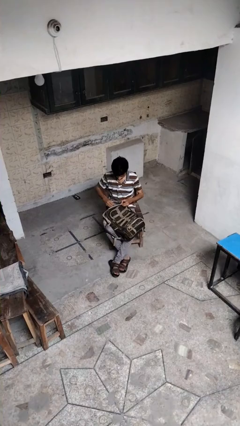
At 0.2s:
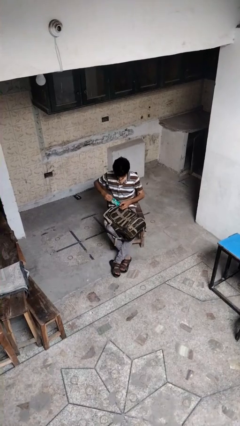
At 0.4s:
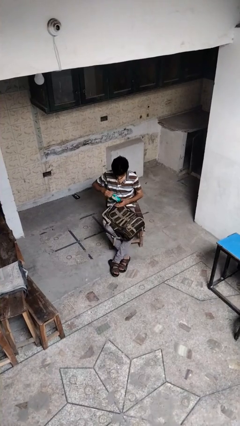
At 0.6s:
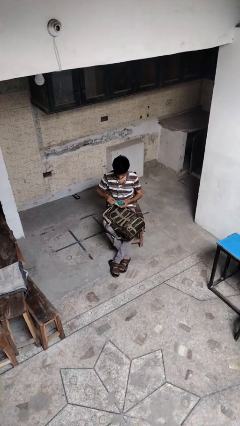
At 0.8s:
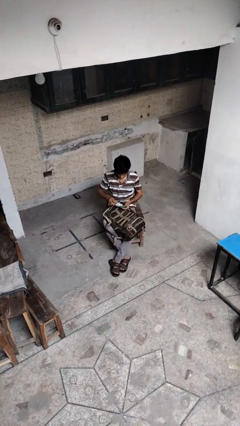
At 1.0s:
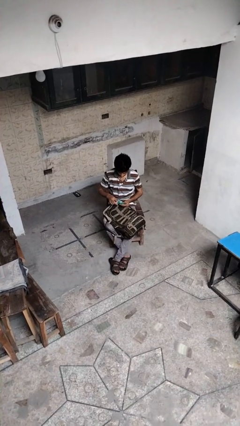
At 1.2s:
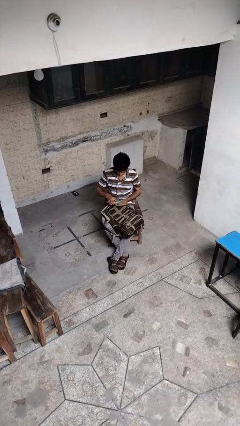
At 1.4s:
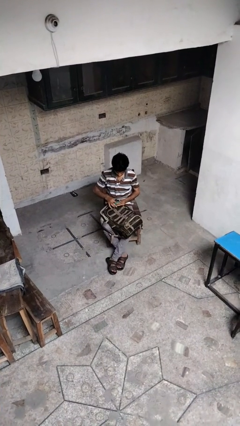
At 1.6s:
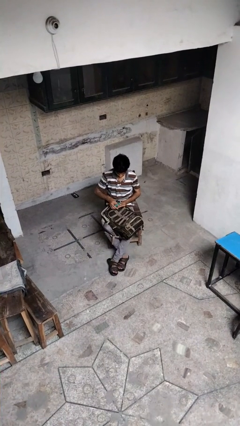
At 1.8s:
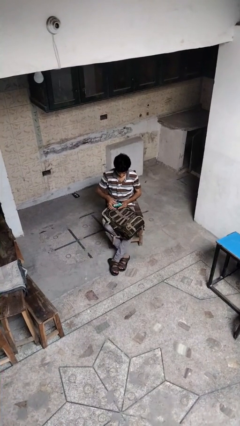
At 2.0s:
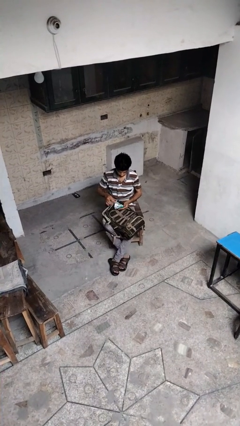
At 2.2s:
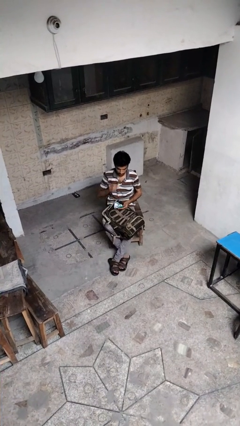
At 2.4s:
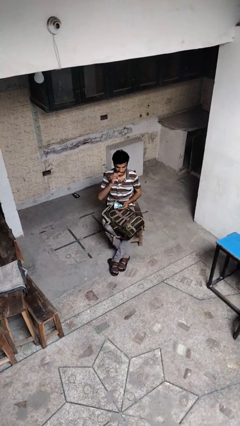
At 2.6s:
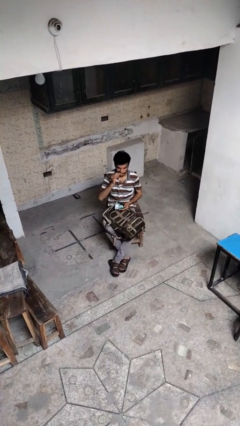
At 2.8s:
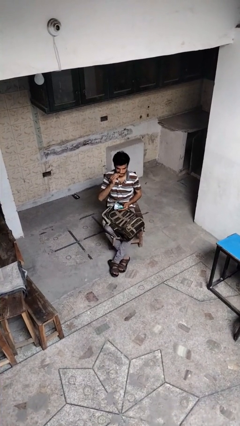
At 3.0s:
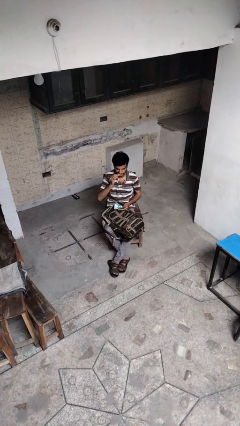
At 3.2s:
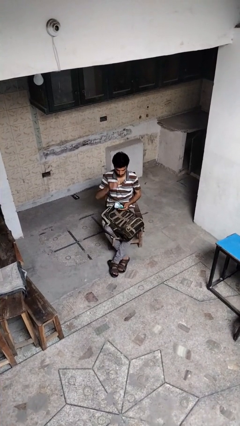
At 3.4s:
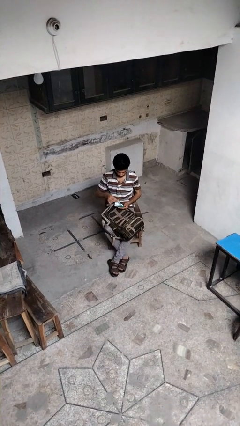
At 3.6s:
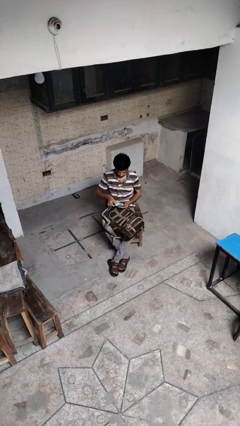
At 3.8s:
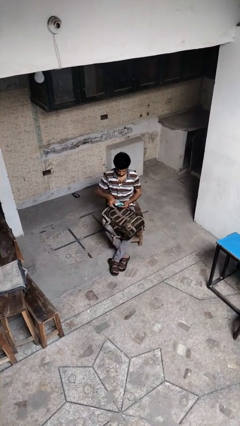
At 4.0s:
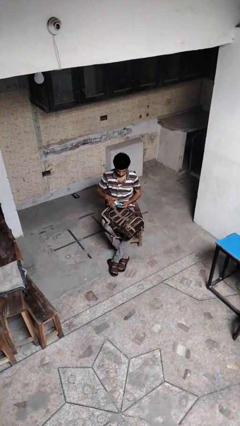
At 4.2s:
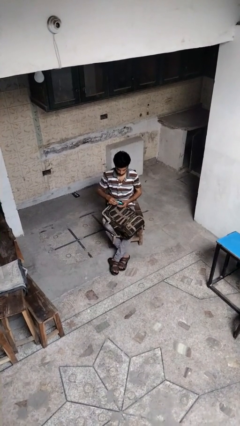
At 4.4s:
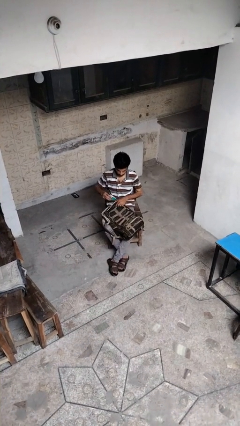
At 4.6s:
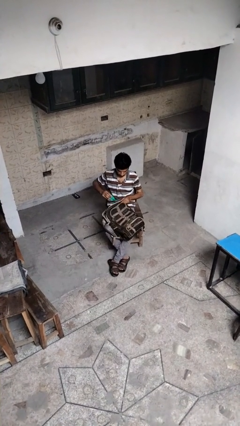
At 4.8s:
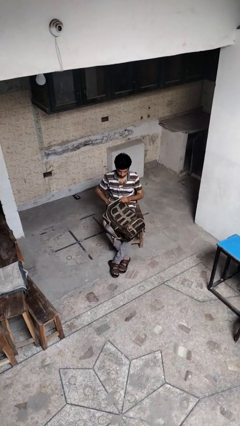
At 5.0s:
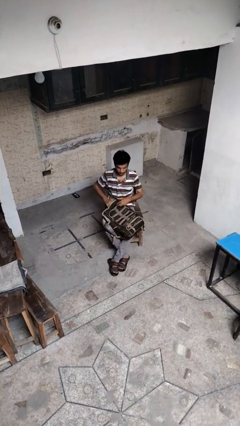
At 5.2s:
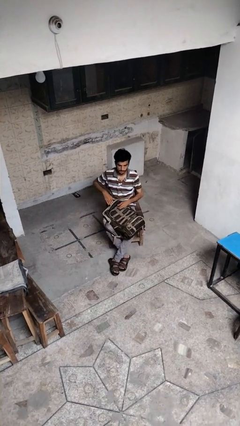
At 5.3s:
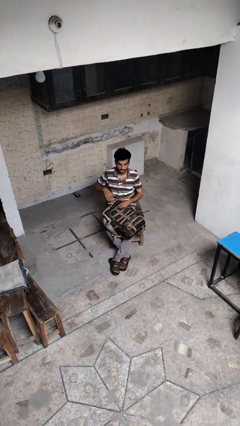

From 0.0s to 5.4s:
person eats snack from bag

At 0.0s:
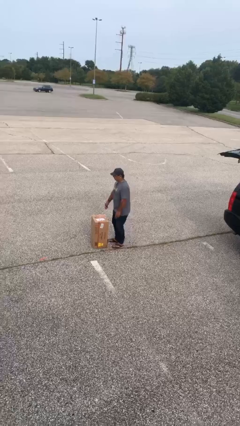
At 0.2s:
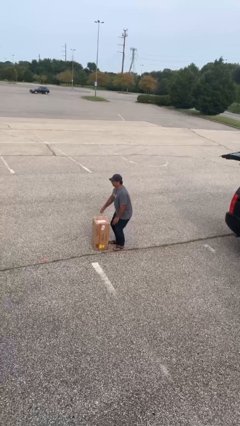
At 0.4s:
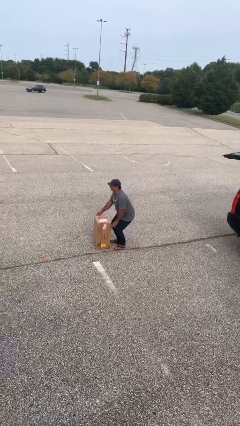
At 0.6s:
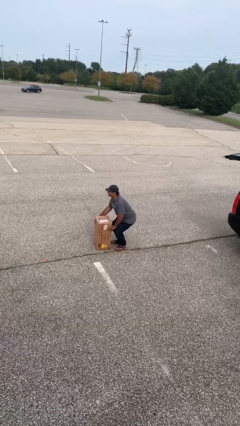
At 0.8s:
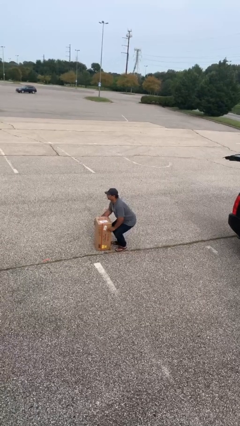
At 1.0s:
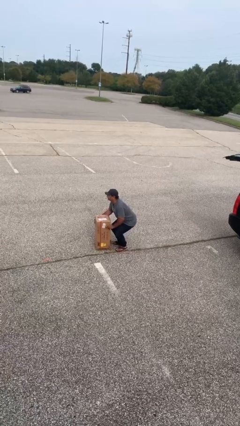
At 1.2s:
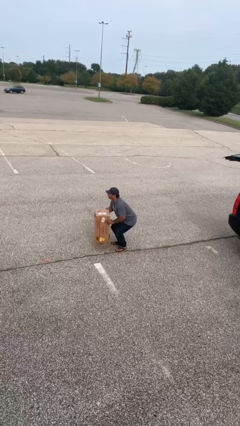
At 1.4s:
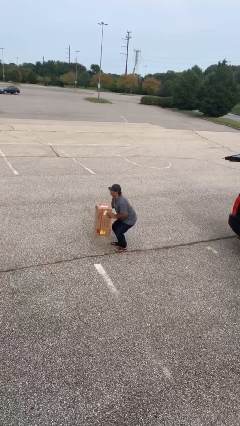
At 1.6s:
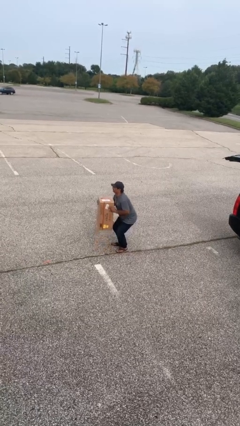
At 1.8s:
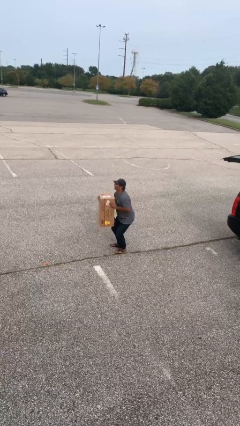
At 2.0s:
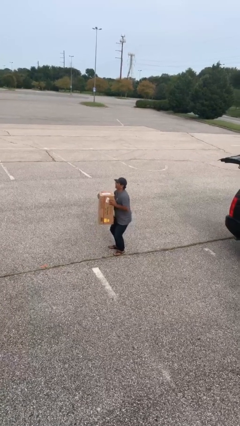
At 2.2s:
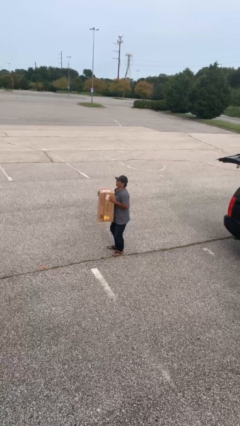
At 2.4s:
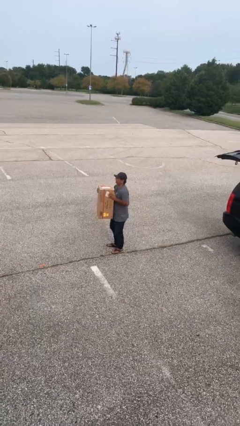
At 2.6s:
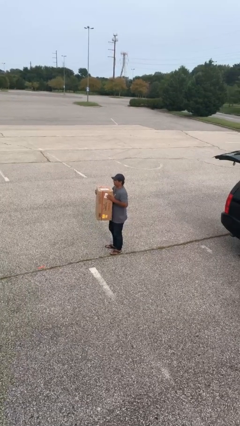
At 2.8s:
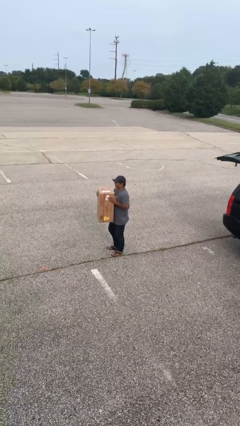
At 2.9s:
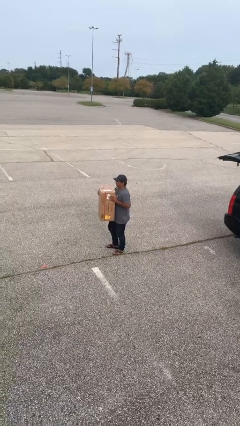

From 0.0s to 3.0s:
person picks up object from floor

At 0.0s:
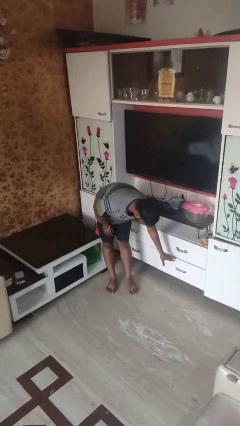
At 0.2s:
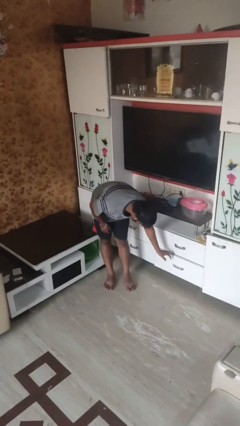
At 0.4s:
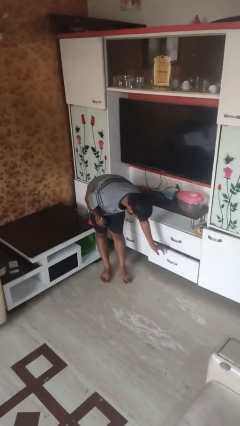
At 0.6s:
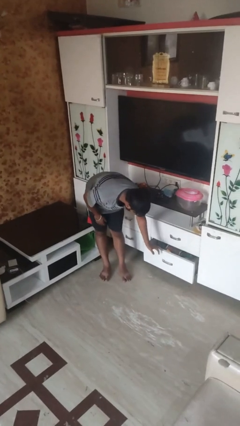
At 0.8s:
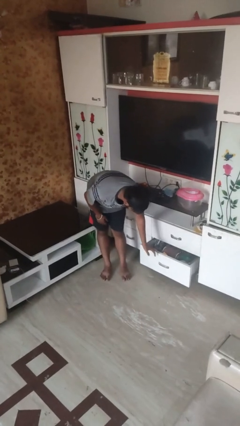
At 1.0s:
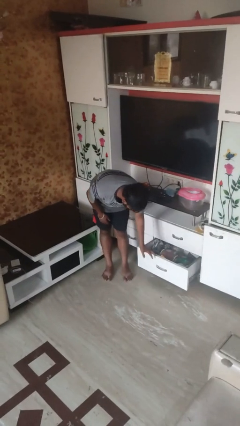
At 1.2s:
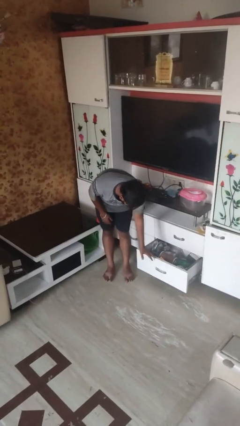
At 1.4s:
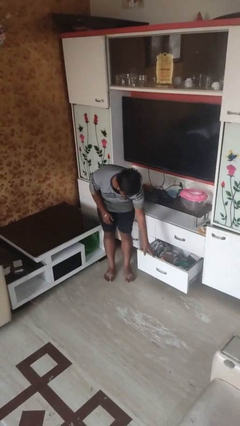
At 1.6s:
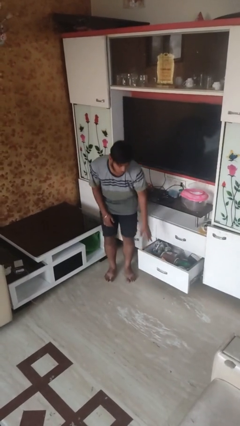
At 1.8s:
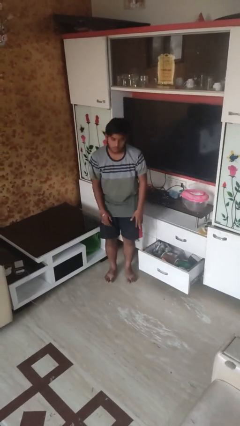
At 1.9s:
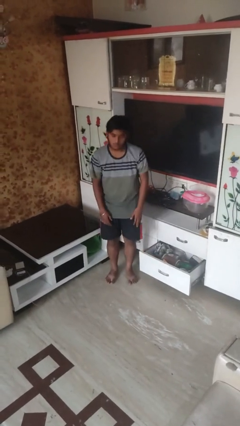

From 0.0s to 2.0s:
person opens dresser drawer

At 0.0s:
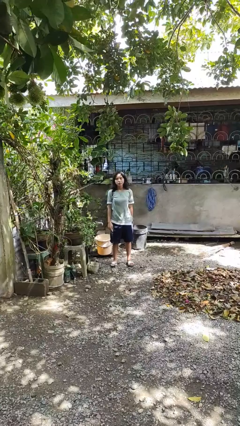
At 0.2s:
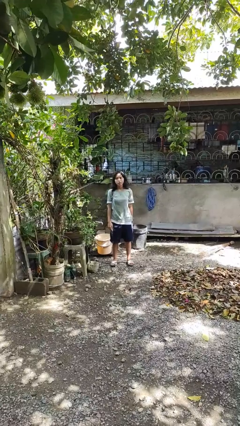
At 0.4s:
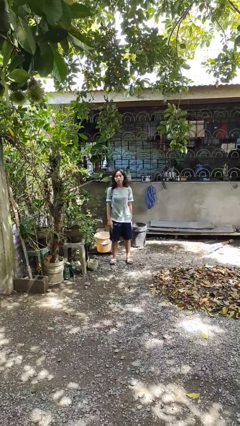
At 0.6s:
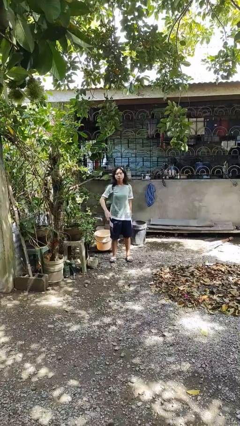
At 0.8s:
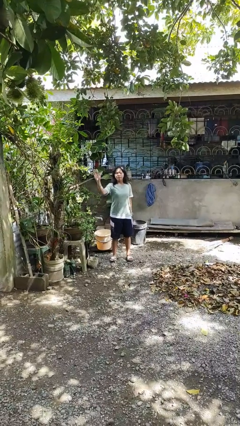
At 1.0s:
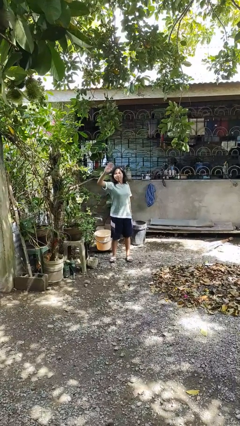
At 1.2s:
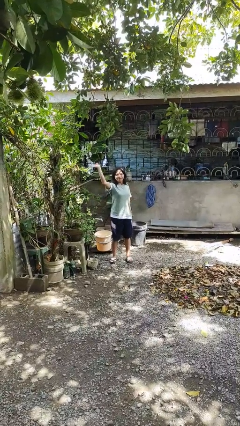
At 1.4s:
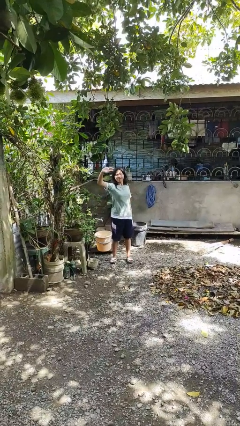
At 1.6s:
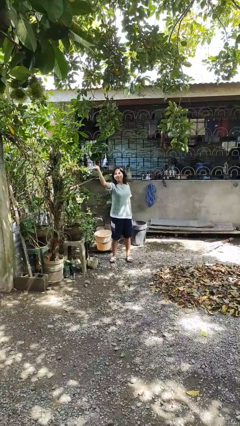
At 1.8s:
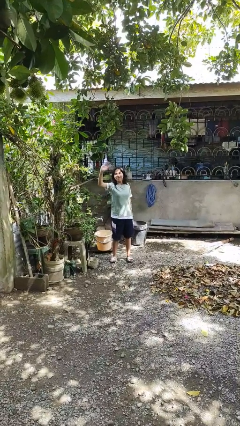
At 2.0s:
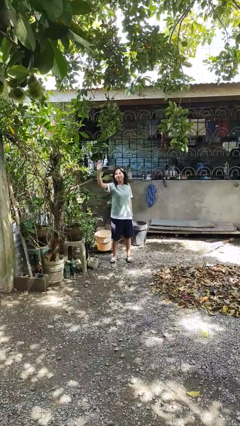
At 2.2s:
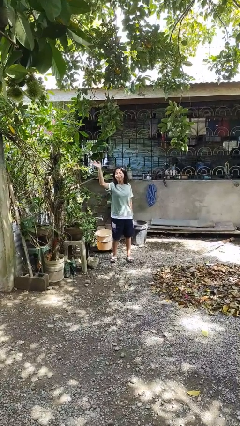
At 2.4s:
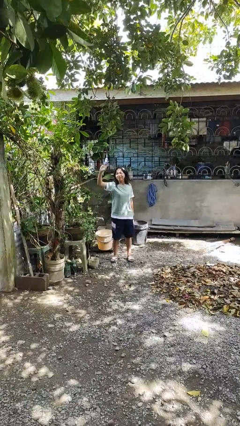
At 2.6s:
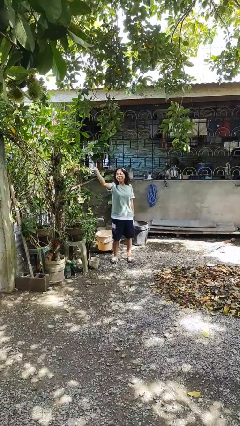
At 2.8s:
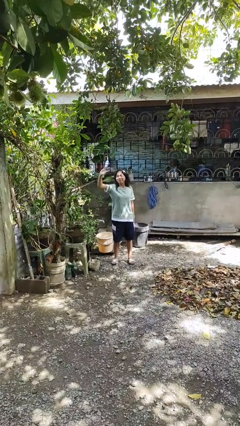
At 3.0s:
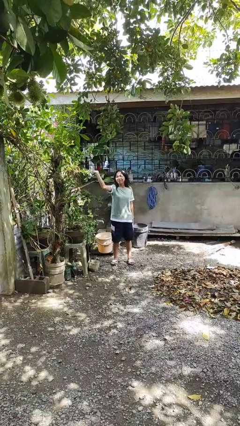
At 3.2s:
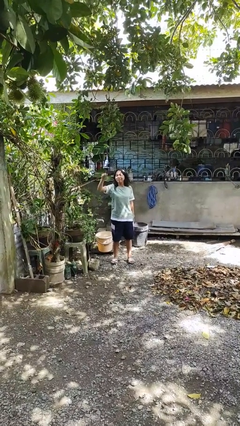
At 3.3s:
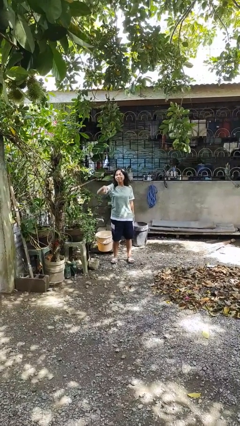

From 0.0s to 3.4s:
person waves at person

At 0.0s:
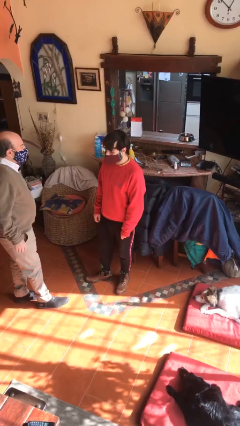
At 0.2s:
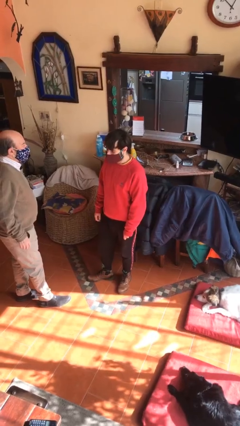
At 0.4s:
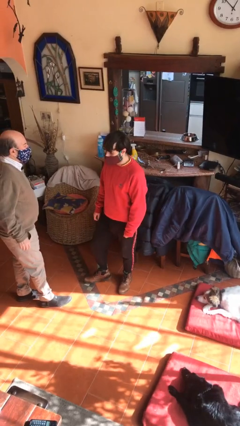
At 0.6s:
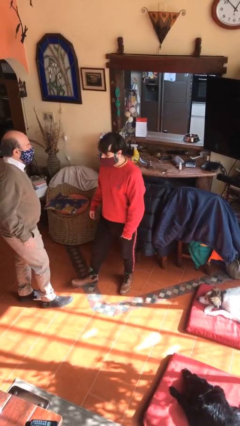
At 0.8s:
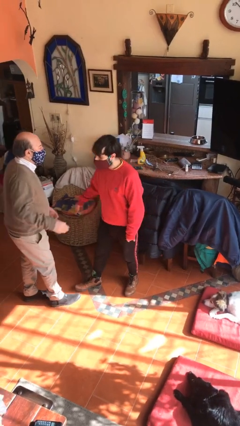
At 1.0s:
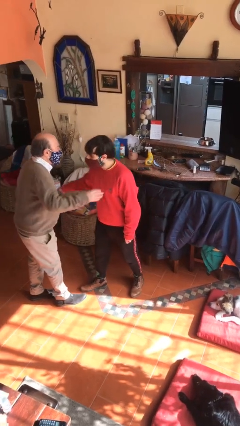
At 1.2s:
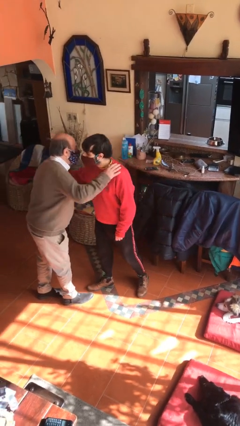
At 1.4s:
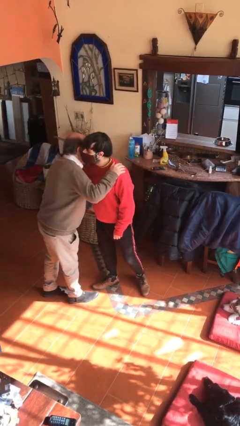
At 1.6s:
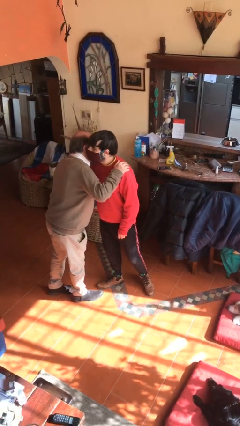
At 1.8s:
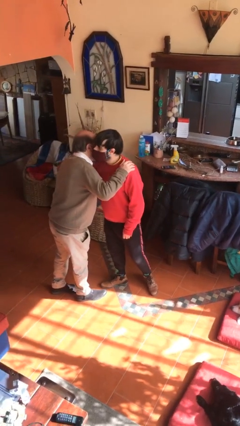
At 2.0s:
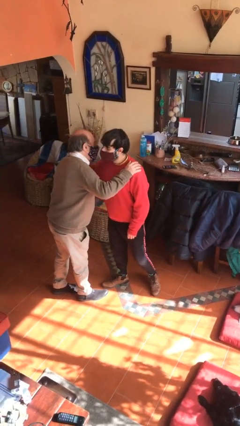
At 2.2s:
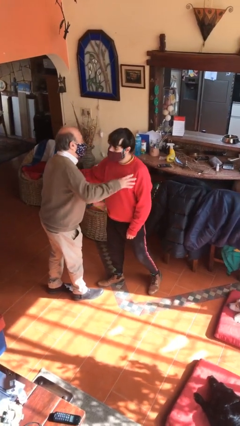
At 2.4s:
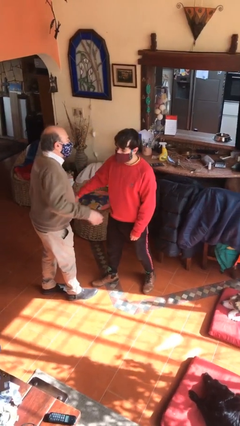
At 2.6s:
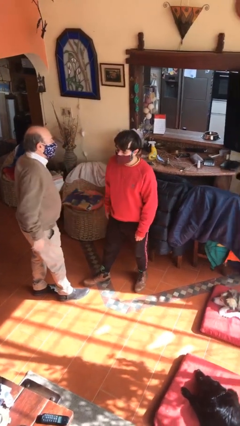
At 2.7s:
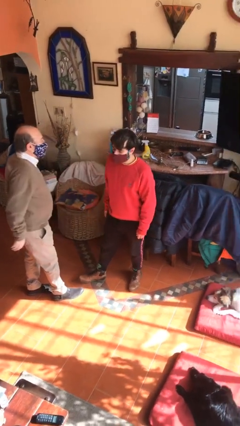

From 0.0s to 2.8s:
person kisses cheek of person

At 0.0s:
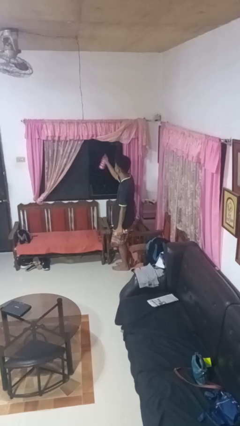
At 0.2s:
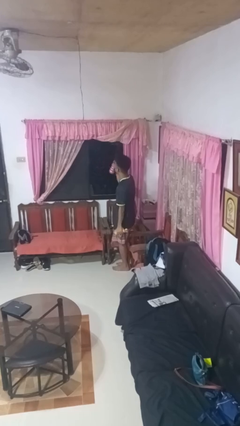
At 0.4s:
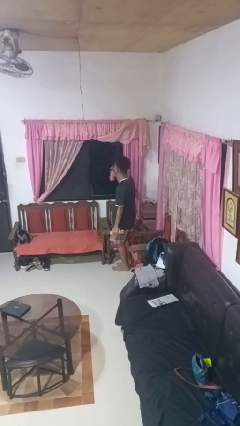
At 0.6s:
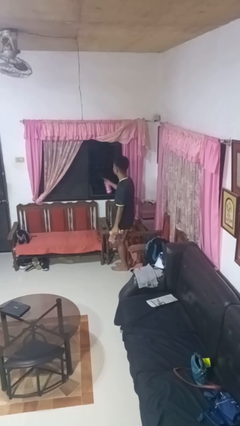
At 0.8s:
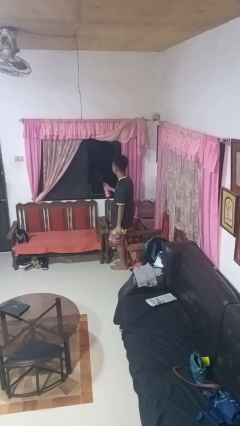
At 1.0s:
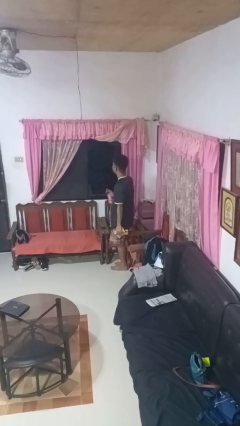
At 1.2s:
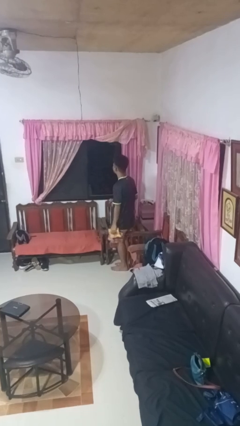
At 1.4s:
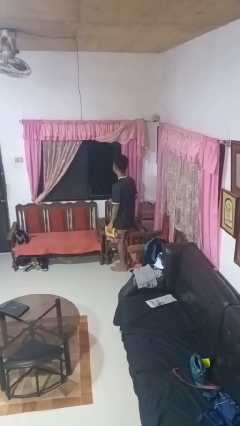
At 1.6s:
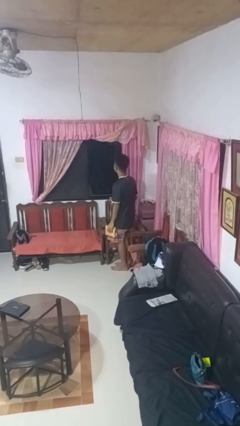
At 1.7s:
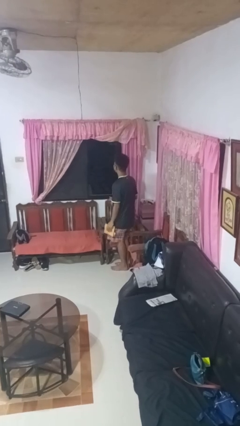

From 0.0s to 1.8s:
person sprays from bottle
